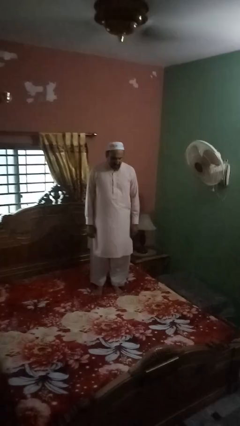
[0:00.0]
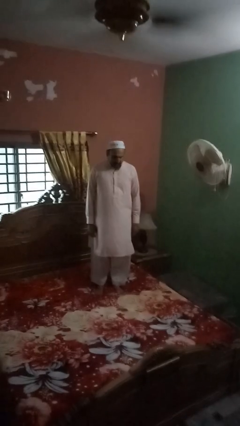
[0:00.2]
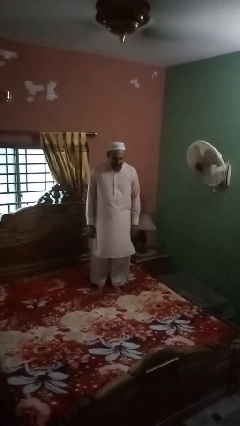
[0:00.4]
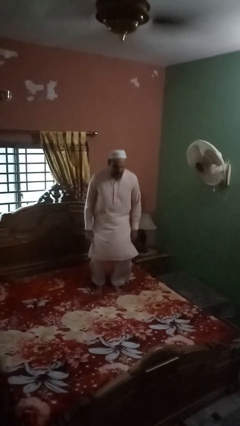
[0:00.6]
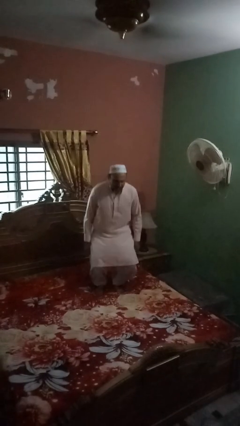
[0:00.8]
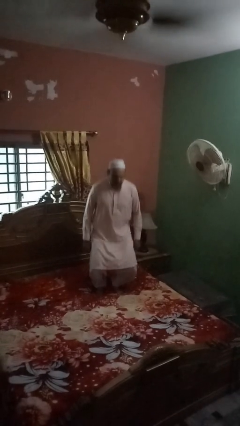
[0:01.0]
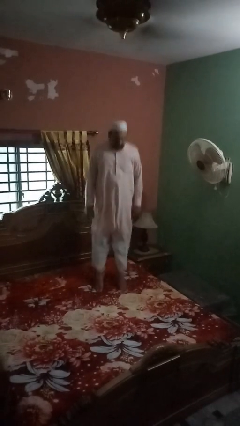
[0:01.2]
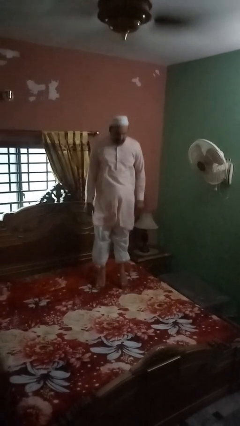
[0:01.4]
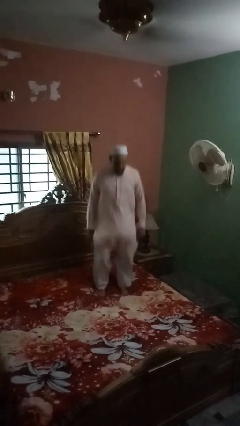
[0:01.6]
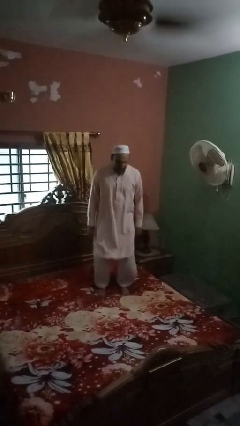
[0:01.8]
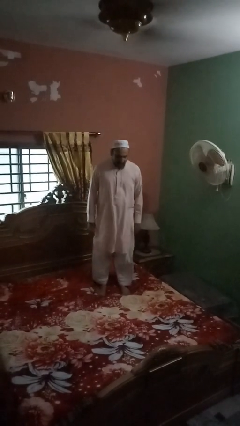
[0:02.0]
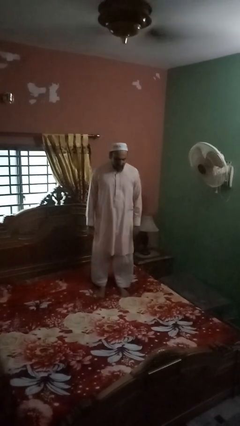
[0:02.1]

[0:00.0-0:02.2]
person jumps on bed

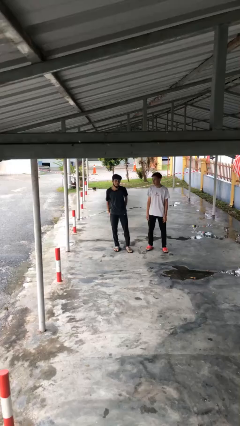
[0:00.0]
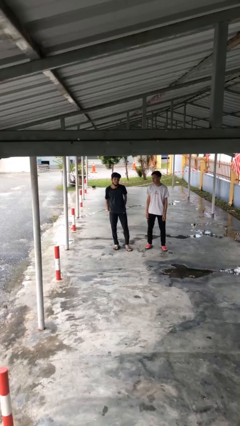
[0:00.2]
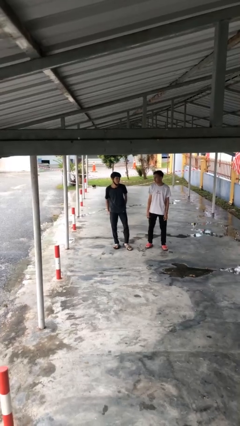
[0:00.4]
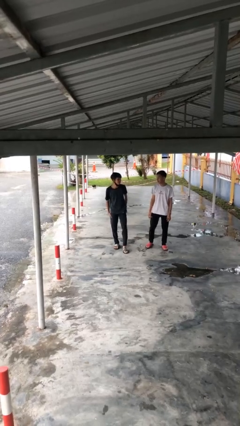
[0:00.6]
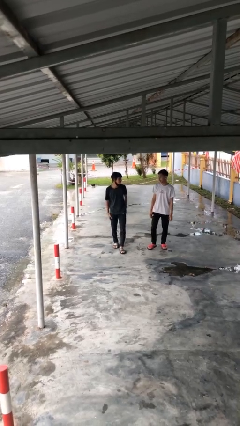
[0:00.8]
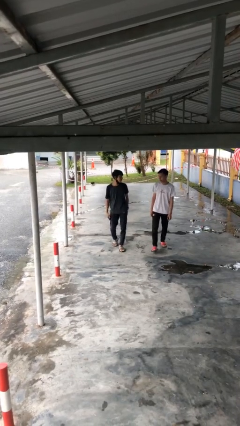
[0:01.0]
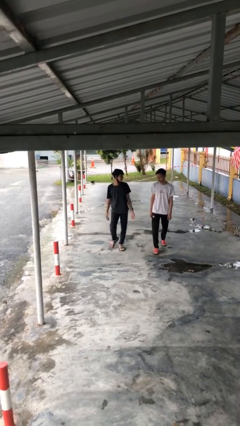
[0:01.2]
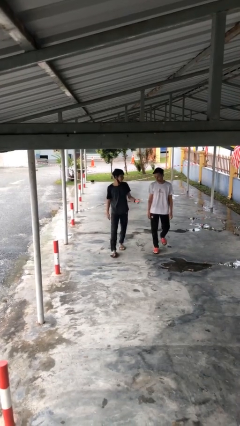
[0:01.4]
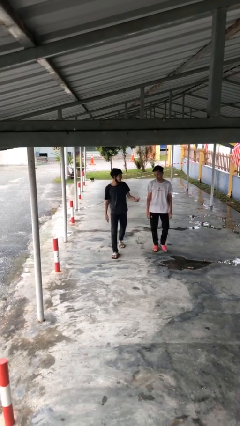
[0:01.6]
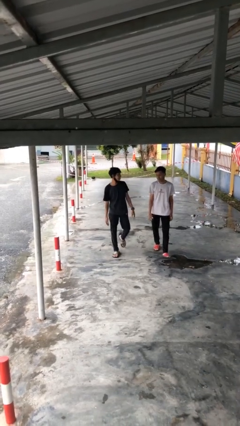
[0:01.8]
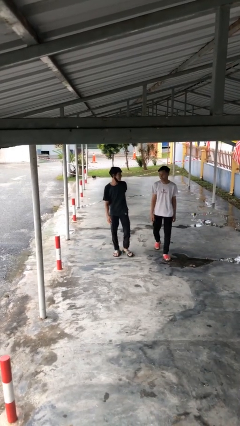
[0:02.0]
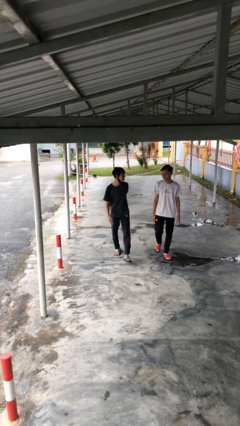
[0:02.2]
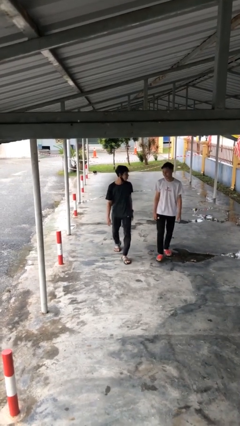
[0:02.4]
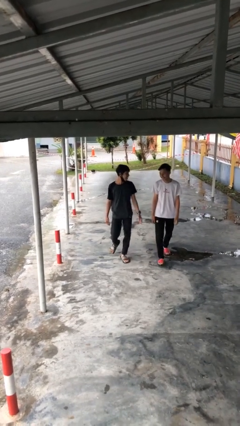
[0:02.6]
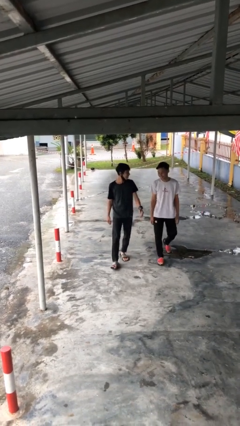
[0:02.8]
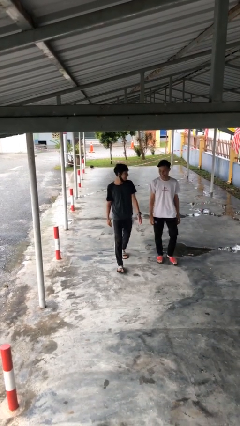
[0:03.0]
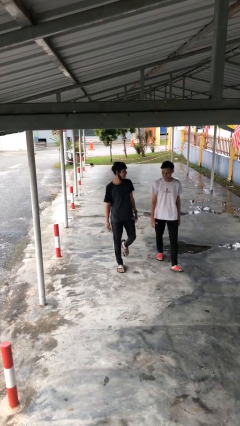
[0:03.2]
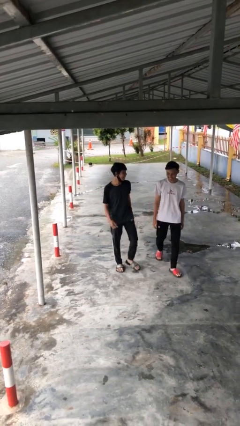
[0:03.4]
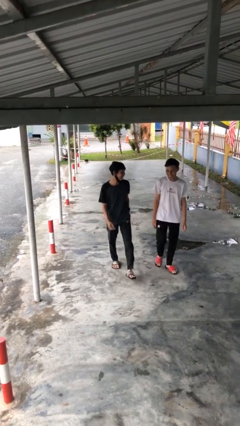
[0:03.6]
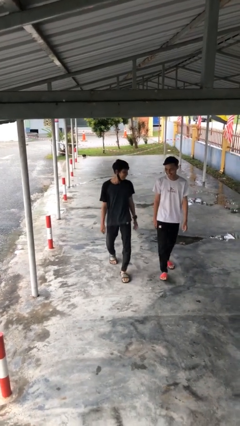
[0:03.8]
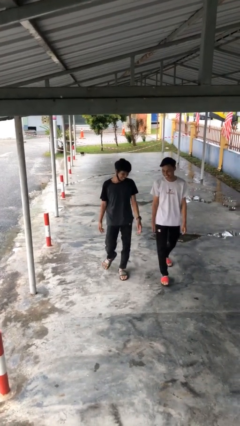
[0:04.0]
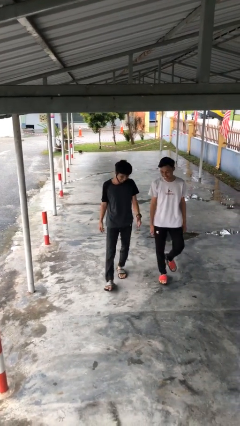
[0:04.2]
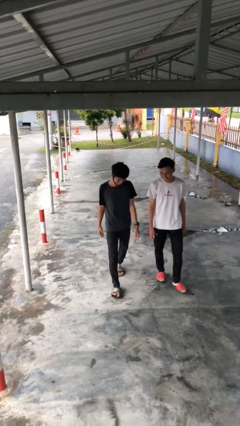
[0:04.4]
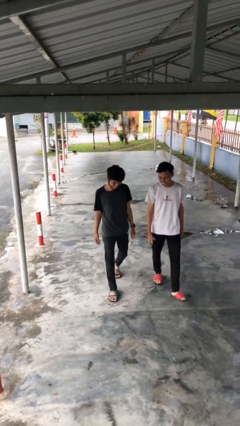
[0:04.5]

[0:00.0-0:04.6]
person talks to person

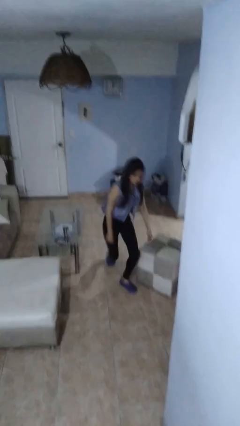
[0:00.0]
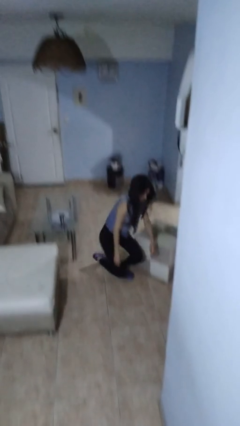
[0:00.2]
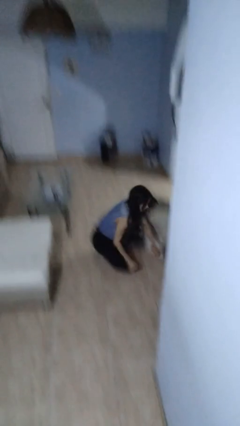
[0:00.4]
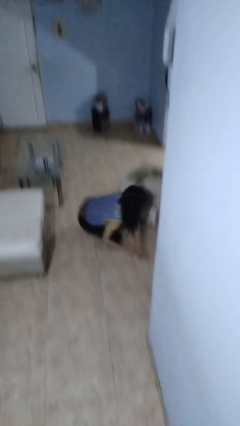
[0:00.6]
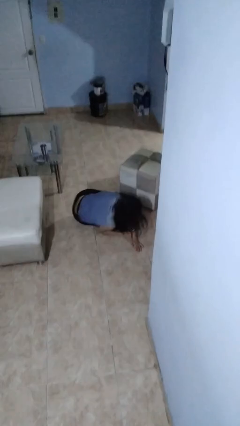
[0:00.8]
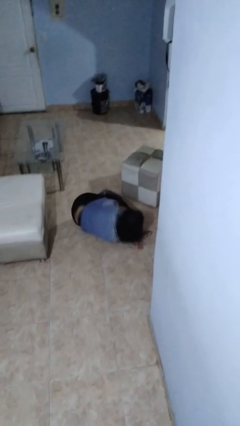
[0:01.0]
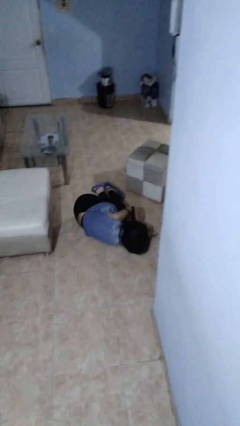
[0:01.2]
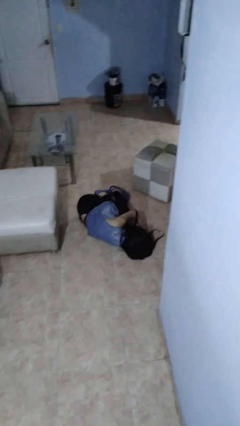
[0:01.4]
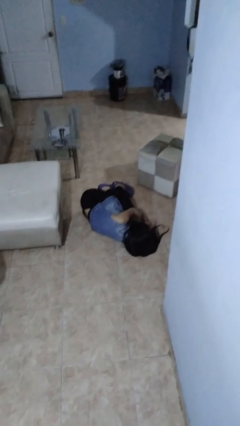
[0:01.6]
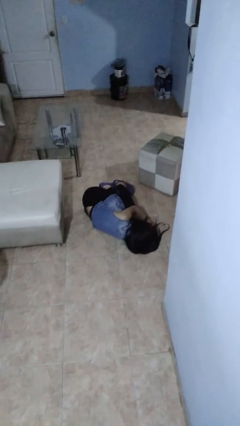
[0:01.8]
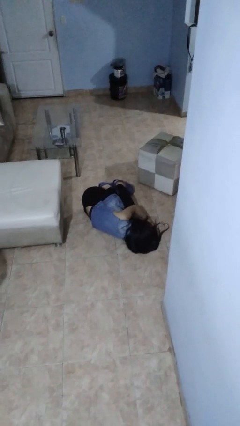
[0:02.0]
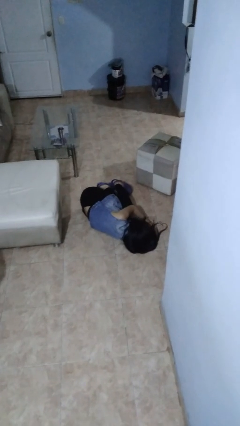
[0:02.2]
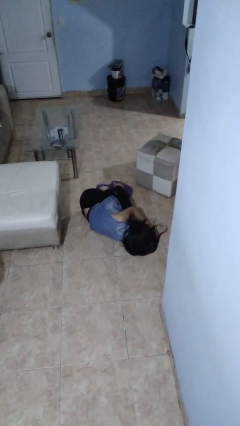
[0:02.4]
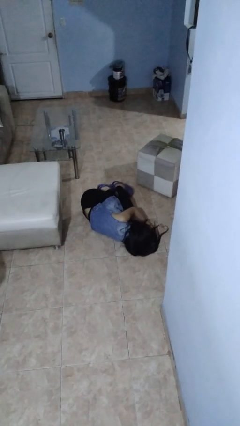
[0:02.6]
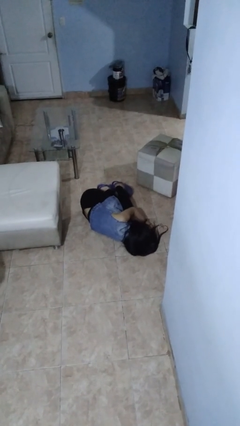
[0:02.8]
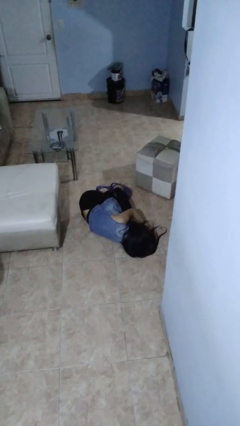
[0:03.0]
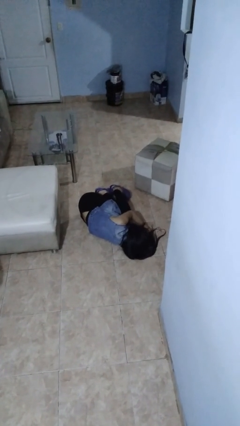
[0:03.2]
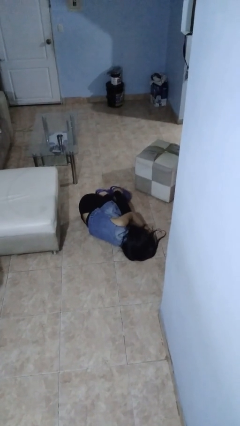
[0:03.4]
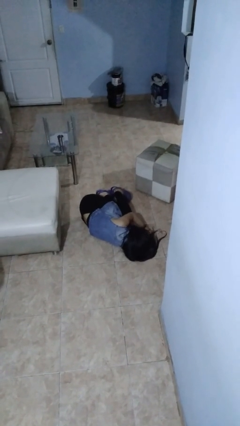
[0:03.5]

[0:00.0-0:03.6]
person lies down on floor

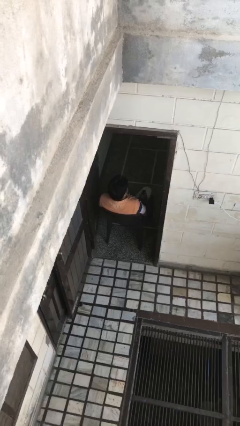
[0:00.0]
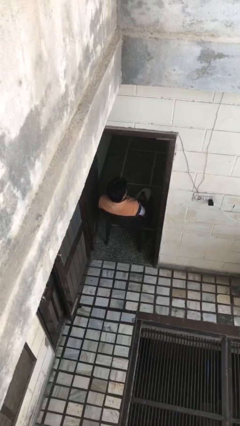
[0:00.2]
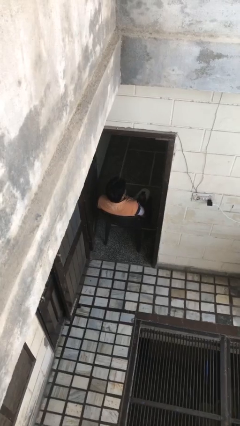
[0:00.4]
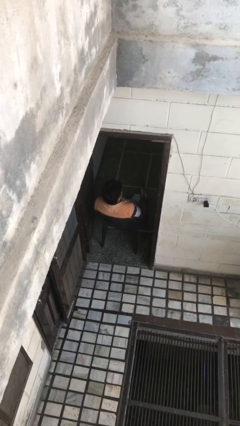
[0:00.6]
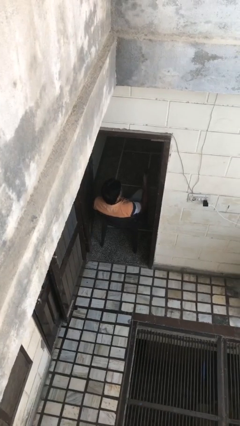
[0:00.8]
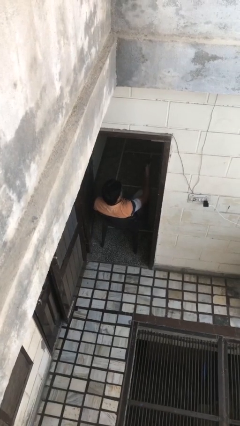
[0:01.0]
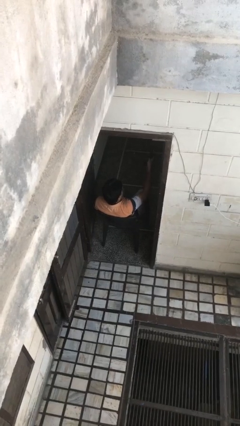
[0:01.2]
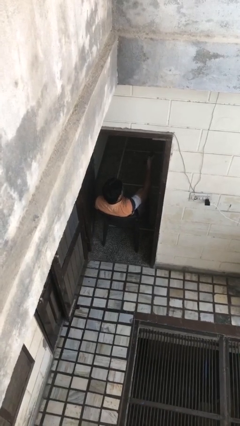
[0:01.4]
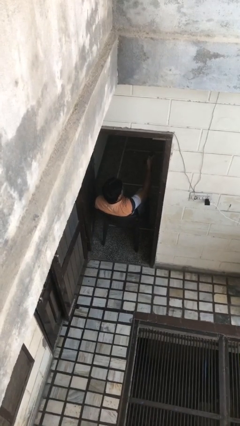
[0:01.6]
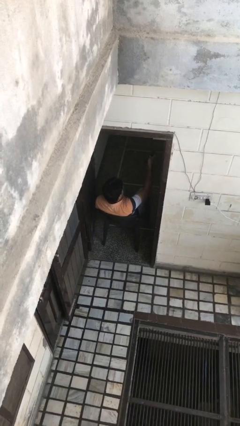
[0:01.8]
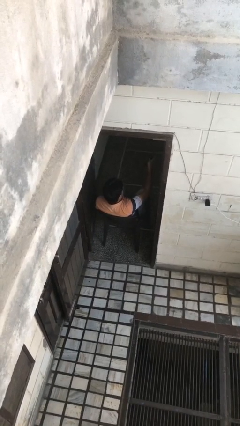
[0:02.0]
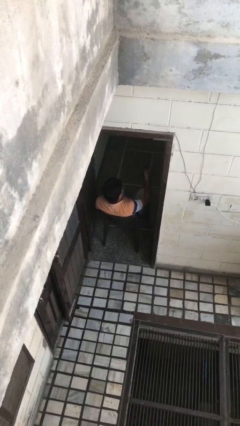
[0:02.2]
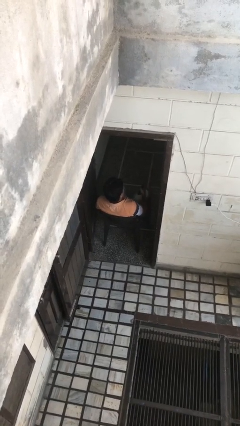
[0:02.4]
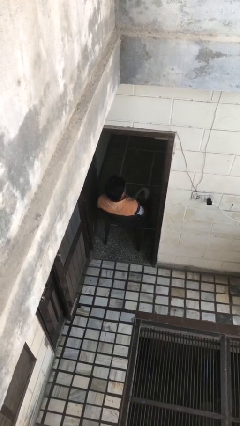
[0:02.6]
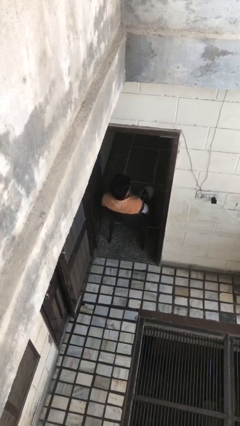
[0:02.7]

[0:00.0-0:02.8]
person uses television remote

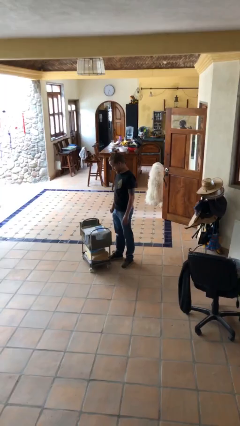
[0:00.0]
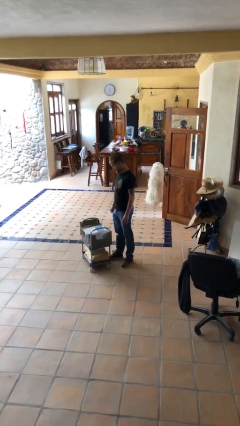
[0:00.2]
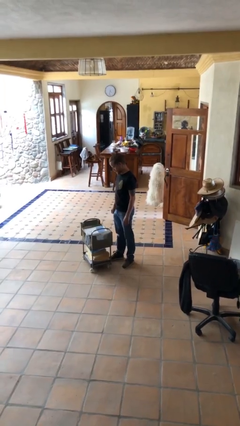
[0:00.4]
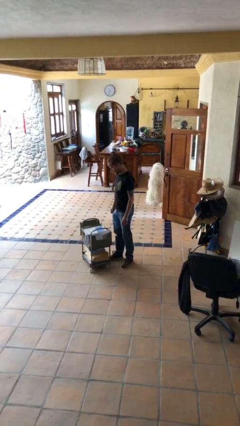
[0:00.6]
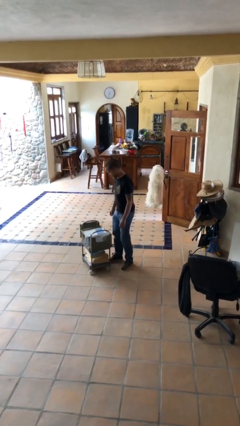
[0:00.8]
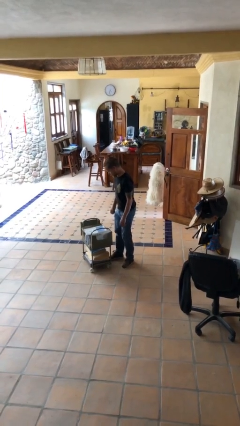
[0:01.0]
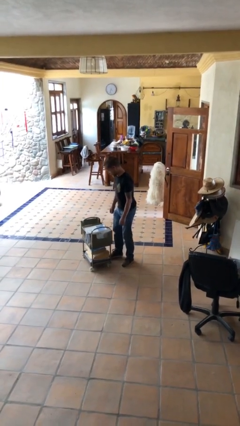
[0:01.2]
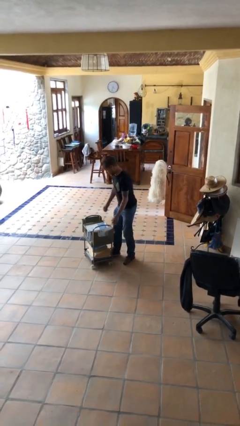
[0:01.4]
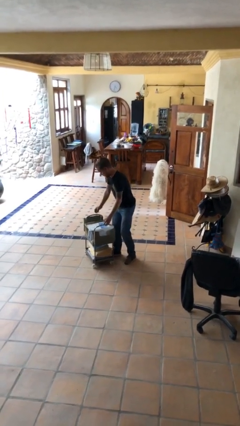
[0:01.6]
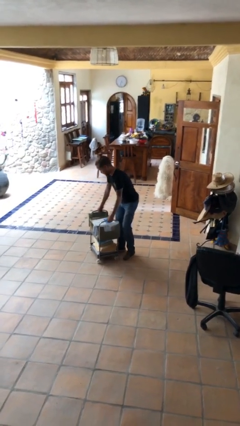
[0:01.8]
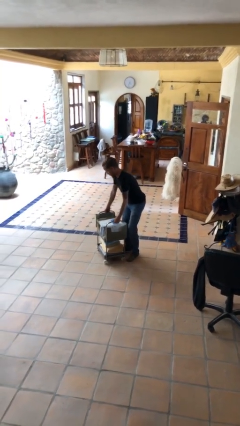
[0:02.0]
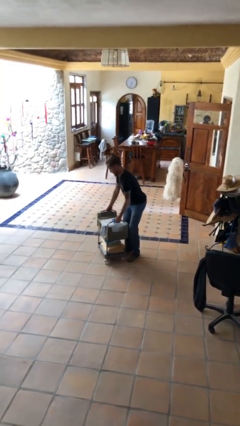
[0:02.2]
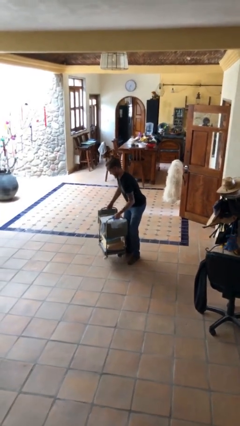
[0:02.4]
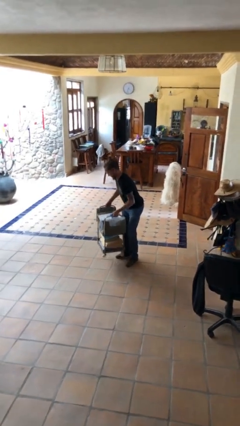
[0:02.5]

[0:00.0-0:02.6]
person picks up object from floor

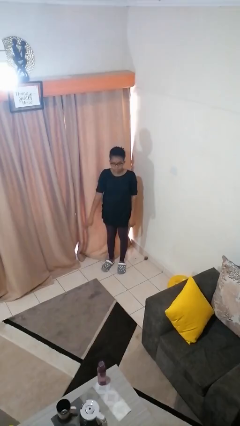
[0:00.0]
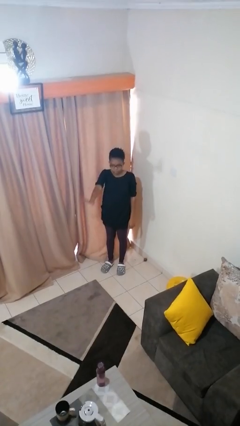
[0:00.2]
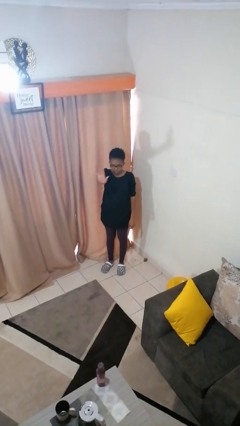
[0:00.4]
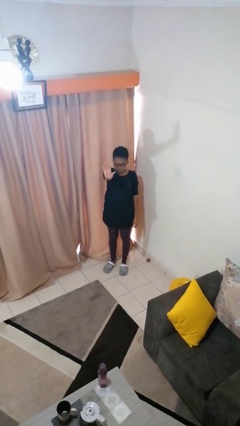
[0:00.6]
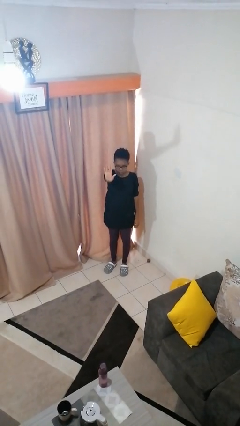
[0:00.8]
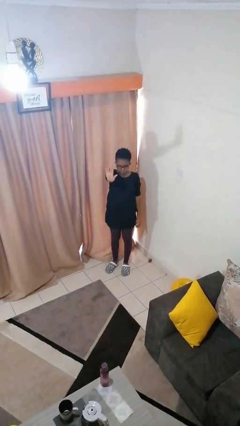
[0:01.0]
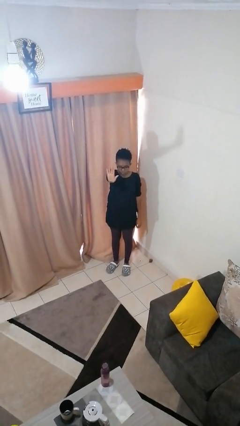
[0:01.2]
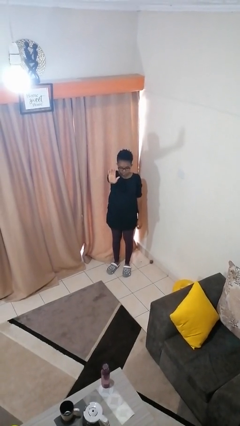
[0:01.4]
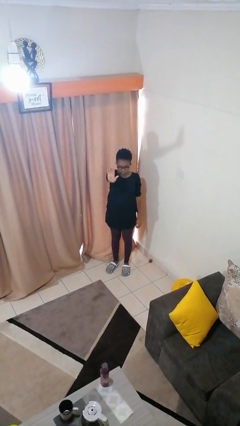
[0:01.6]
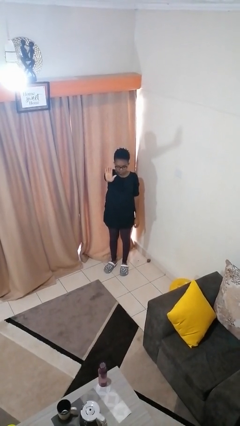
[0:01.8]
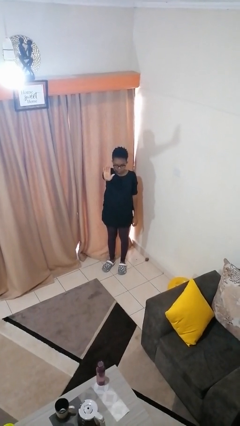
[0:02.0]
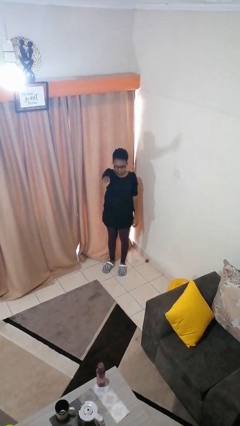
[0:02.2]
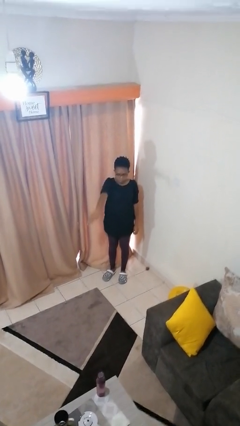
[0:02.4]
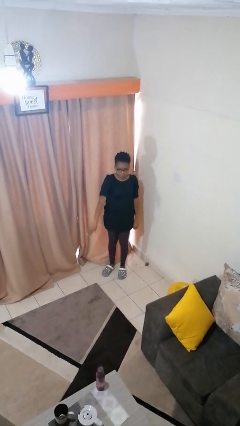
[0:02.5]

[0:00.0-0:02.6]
person gestures stop
